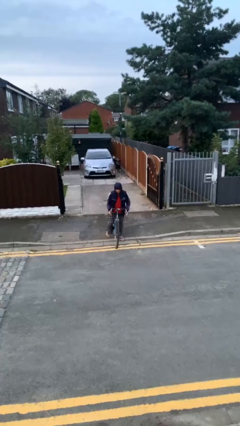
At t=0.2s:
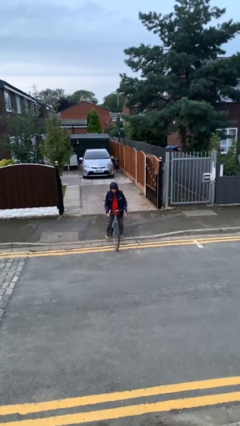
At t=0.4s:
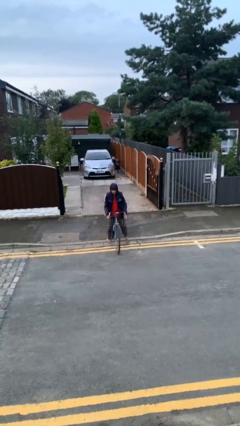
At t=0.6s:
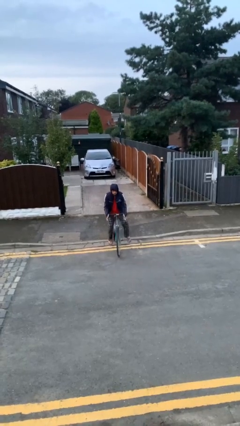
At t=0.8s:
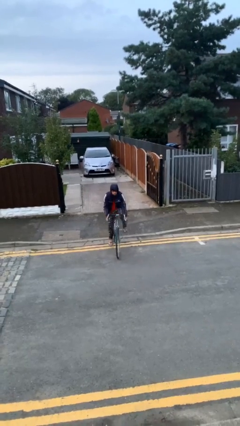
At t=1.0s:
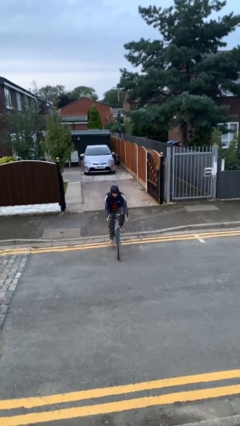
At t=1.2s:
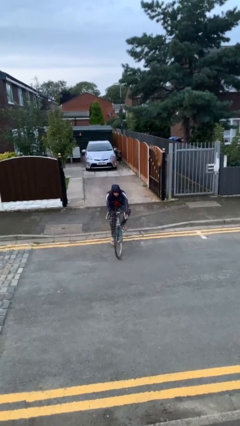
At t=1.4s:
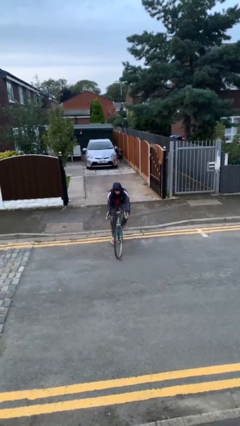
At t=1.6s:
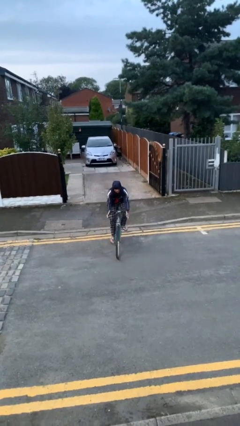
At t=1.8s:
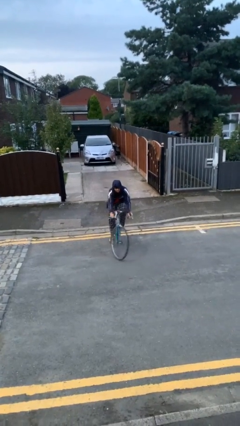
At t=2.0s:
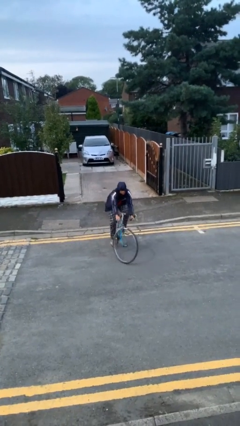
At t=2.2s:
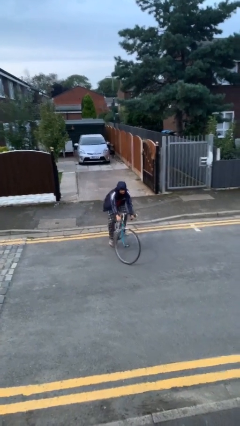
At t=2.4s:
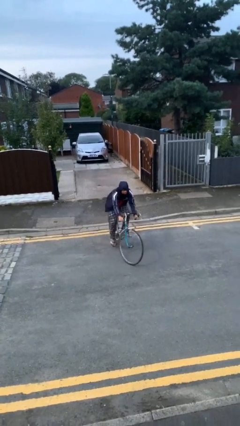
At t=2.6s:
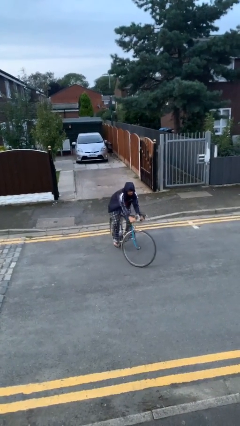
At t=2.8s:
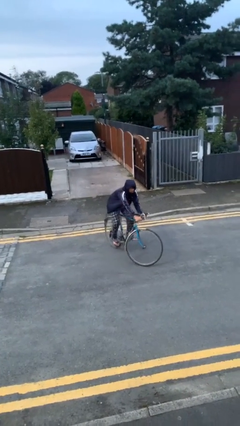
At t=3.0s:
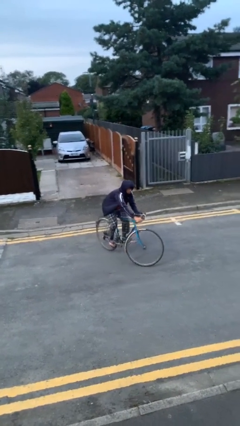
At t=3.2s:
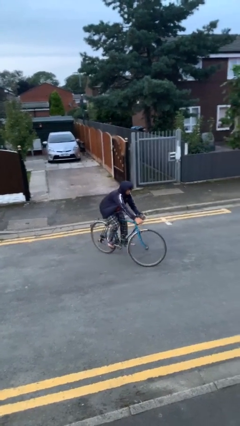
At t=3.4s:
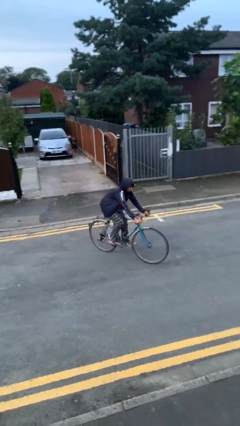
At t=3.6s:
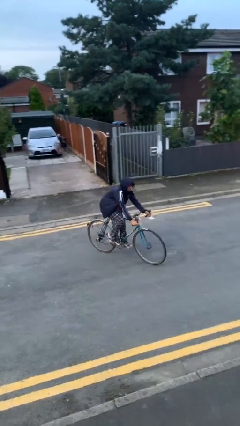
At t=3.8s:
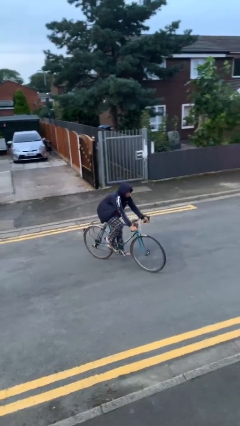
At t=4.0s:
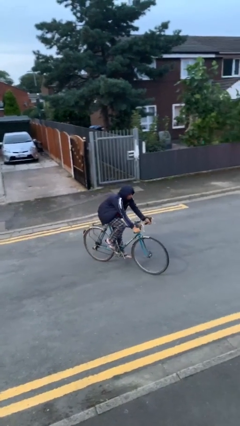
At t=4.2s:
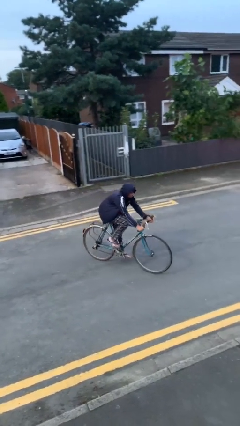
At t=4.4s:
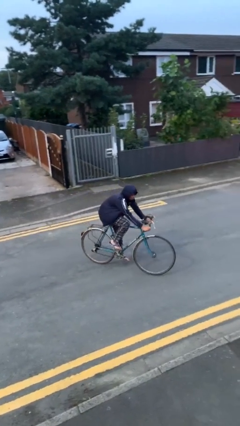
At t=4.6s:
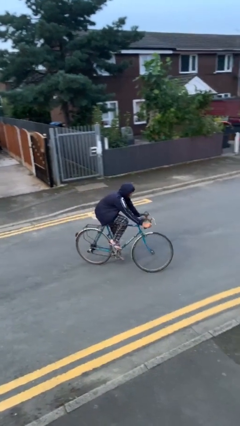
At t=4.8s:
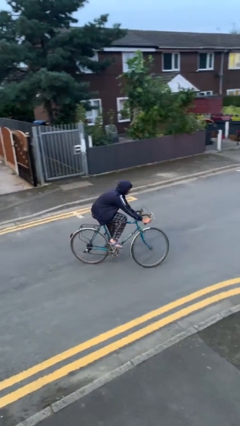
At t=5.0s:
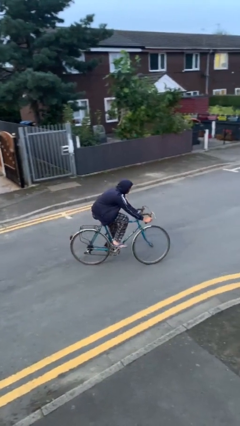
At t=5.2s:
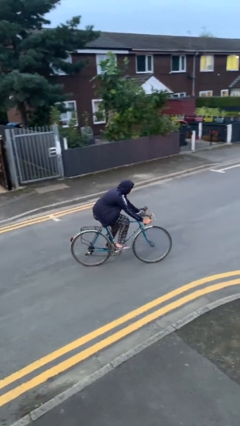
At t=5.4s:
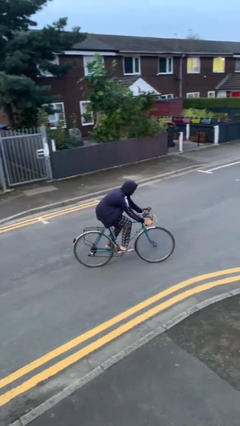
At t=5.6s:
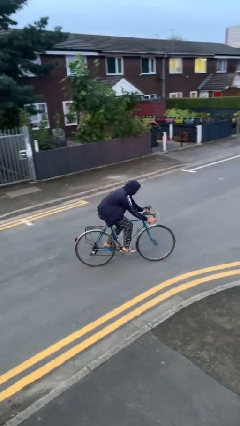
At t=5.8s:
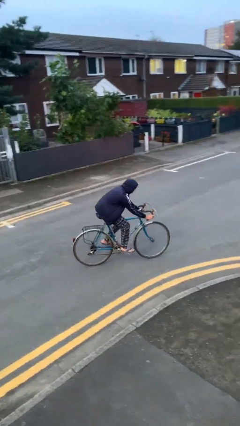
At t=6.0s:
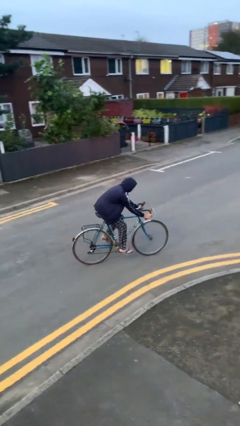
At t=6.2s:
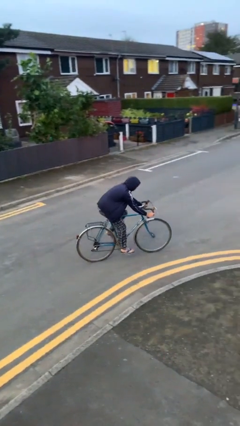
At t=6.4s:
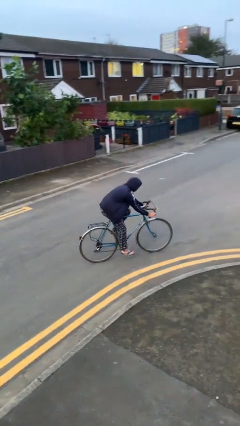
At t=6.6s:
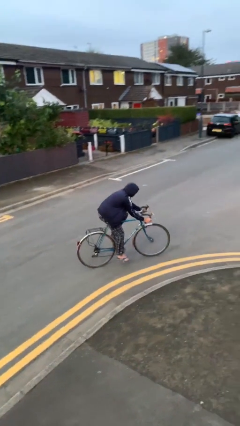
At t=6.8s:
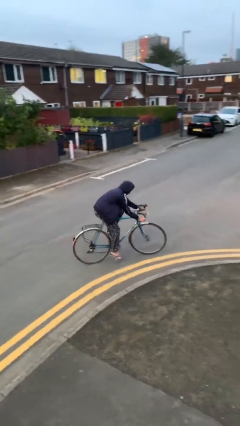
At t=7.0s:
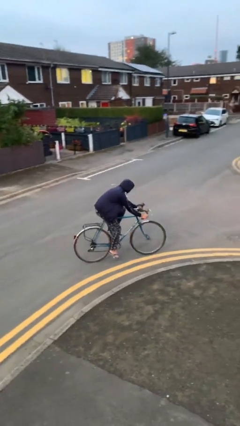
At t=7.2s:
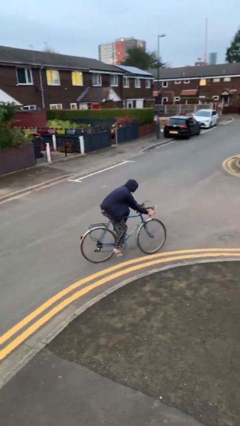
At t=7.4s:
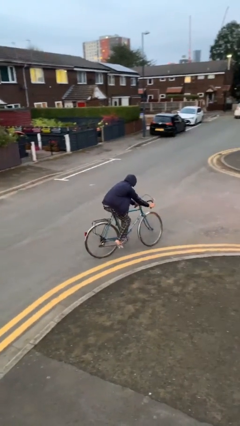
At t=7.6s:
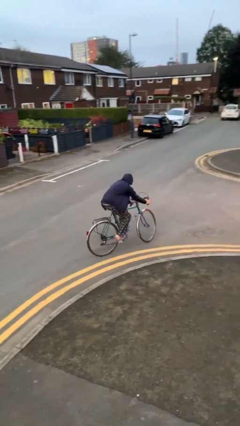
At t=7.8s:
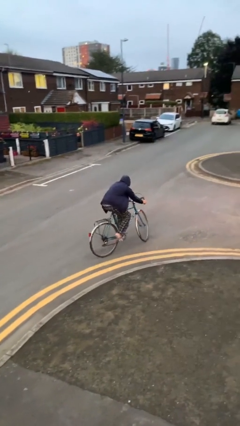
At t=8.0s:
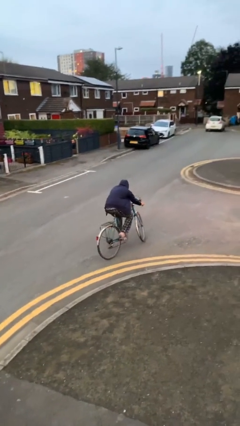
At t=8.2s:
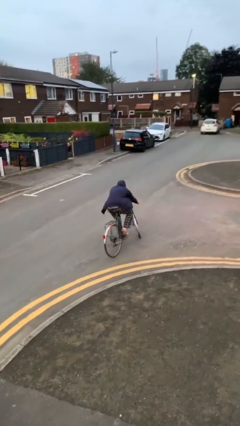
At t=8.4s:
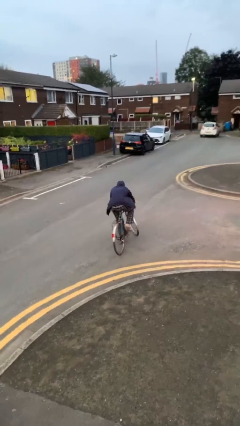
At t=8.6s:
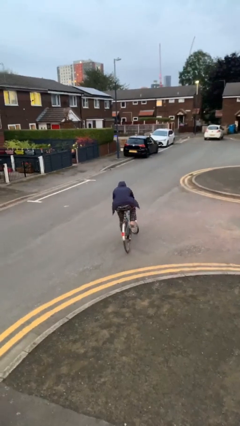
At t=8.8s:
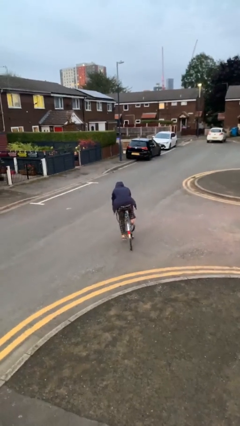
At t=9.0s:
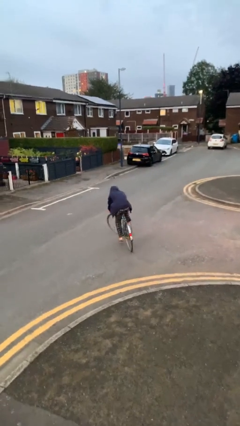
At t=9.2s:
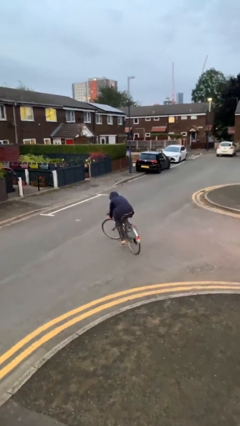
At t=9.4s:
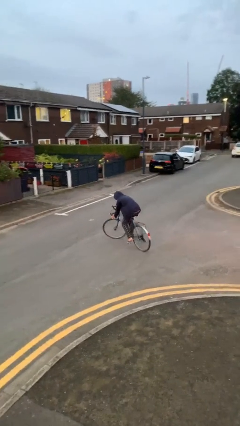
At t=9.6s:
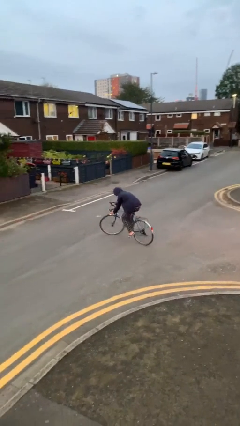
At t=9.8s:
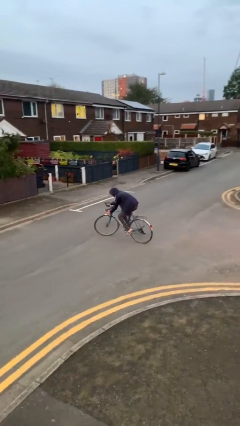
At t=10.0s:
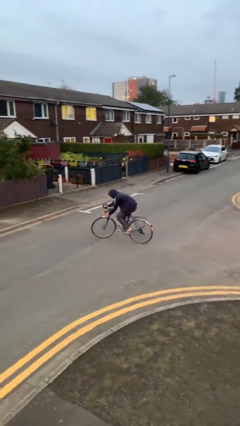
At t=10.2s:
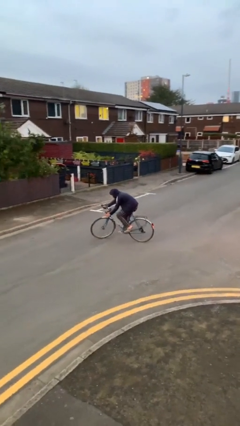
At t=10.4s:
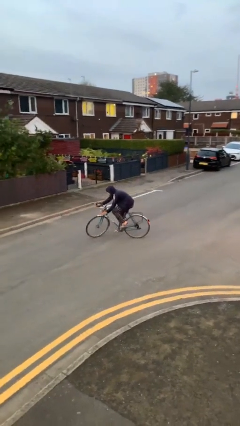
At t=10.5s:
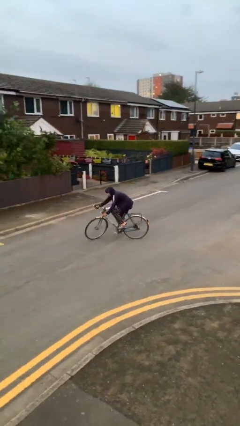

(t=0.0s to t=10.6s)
person rides bicycle

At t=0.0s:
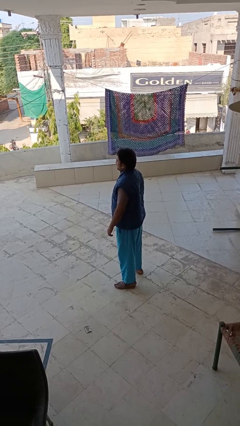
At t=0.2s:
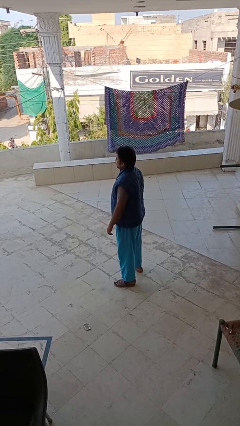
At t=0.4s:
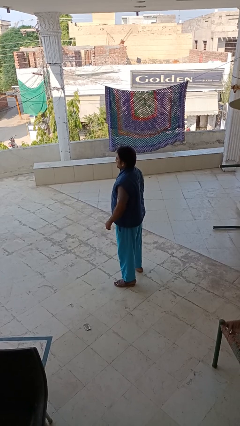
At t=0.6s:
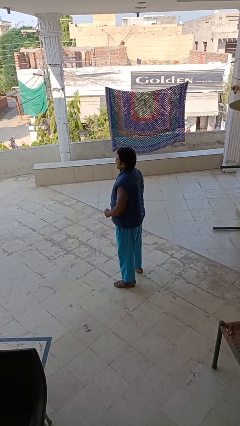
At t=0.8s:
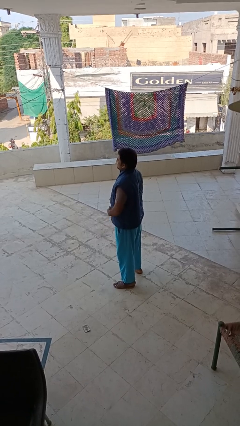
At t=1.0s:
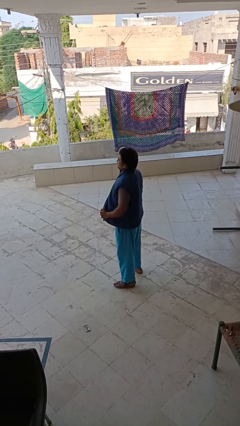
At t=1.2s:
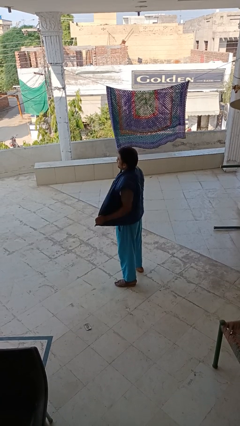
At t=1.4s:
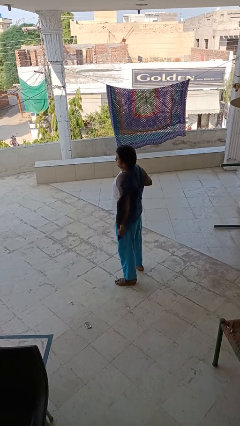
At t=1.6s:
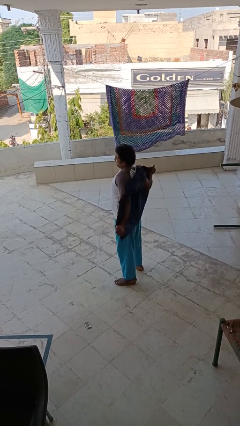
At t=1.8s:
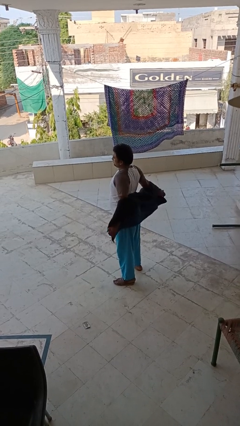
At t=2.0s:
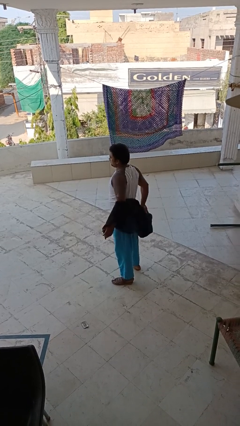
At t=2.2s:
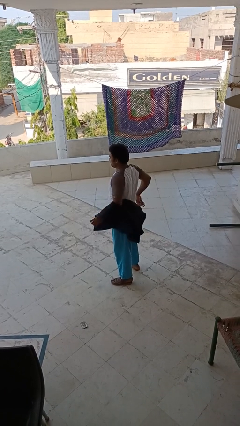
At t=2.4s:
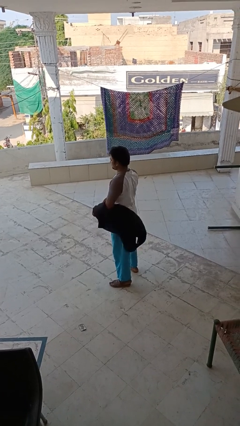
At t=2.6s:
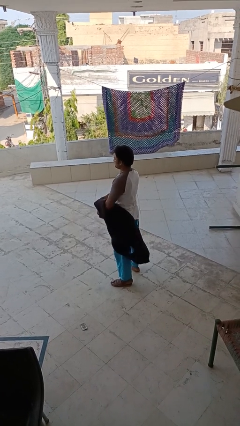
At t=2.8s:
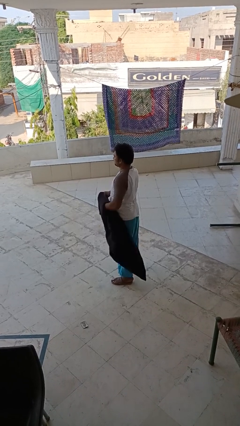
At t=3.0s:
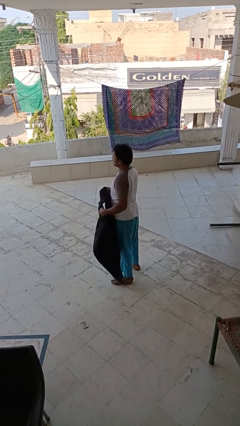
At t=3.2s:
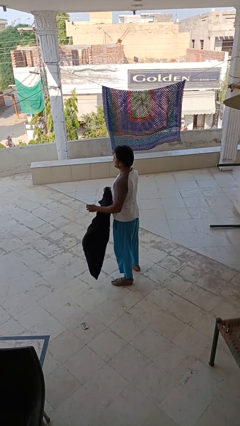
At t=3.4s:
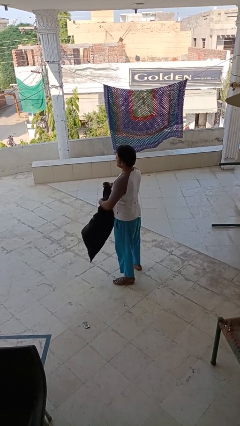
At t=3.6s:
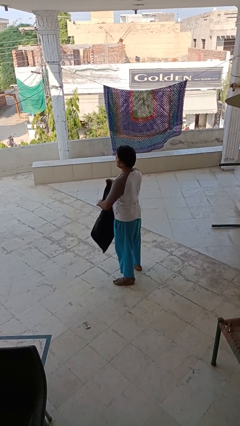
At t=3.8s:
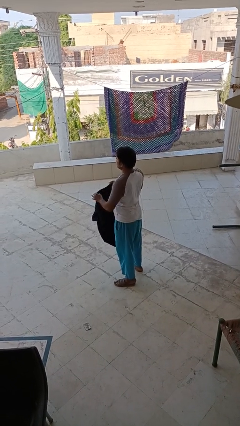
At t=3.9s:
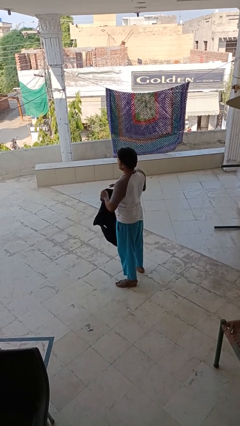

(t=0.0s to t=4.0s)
person takes off jacket

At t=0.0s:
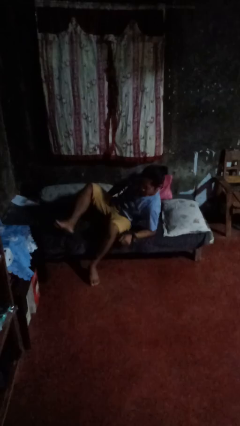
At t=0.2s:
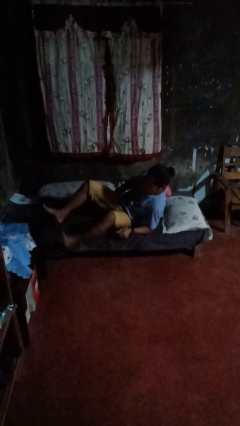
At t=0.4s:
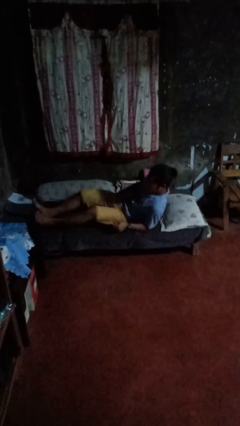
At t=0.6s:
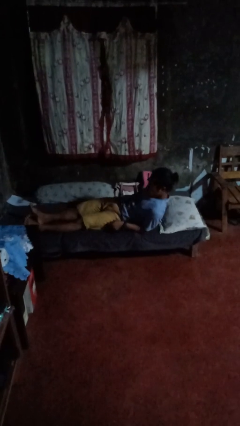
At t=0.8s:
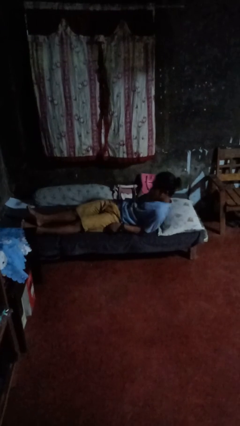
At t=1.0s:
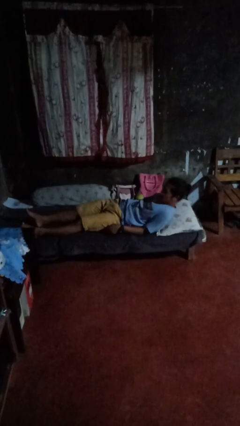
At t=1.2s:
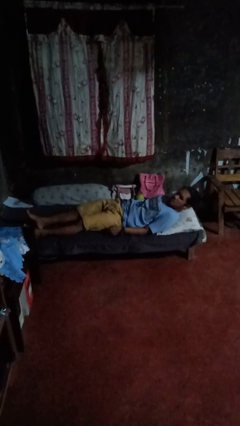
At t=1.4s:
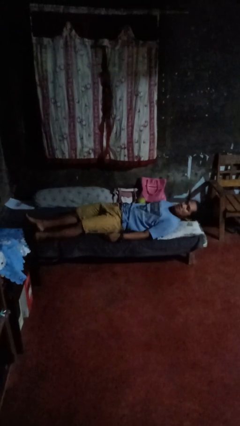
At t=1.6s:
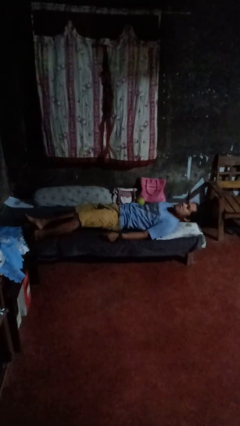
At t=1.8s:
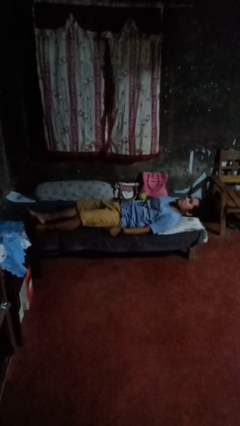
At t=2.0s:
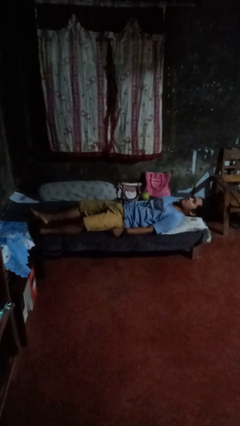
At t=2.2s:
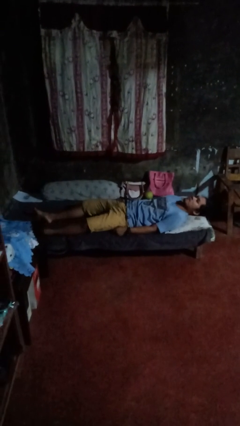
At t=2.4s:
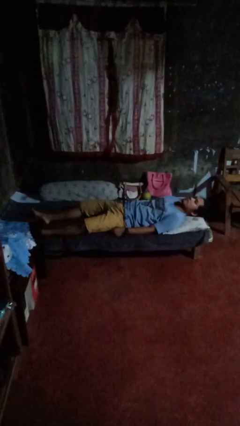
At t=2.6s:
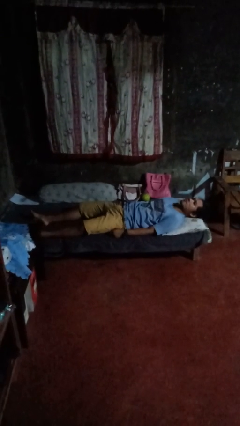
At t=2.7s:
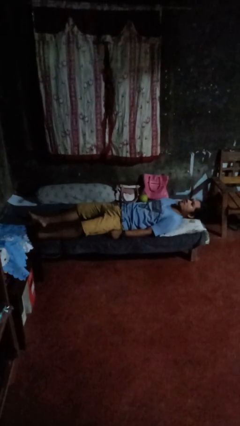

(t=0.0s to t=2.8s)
person lies down on bed

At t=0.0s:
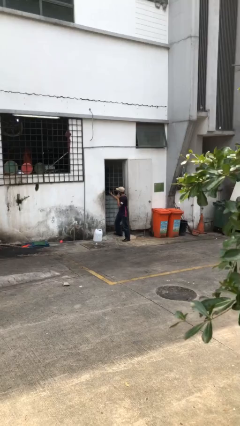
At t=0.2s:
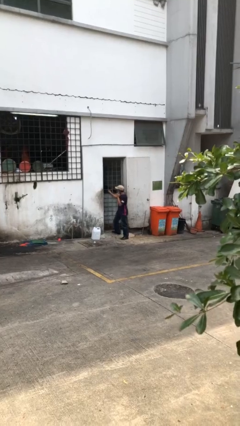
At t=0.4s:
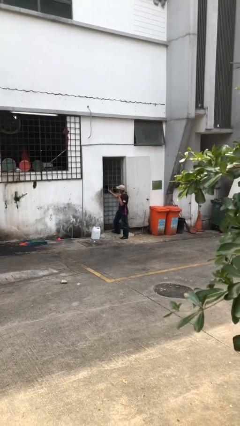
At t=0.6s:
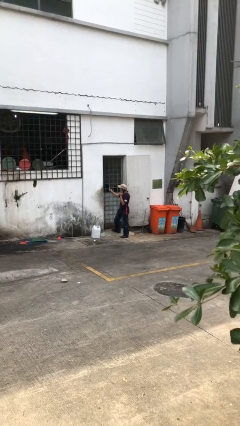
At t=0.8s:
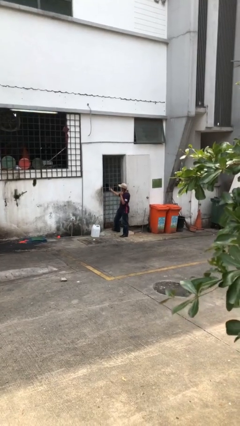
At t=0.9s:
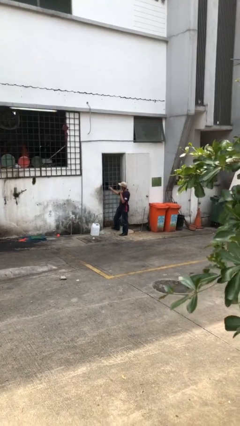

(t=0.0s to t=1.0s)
person closes facility door
